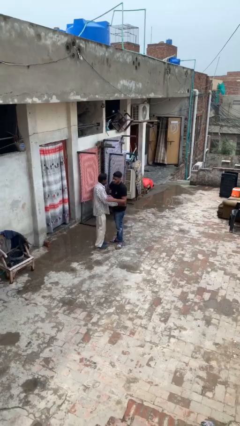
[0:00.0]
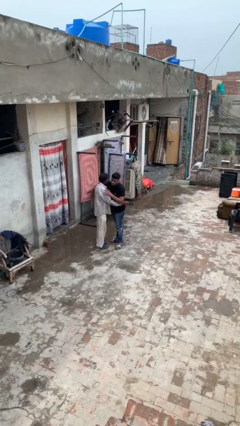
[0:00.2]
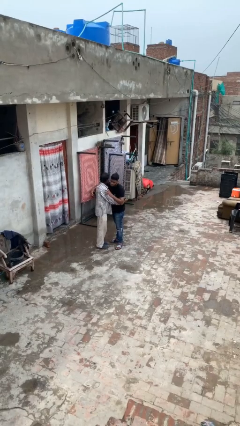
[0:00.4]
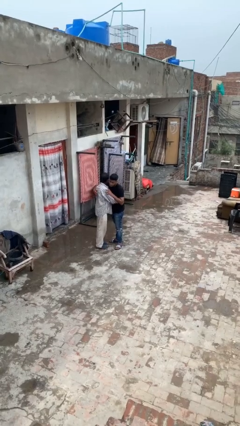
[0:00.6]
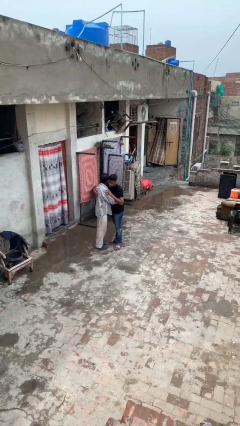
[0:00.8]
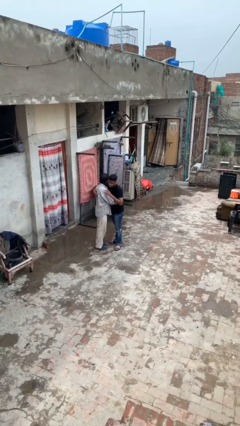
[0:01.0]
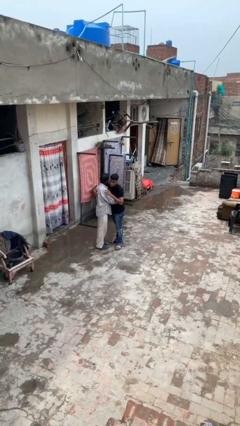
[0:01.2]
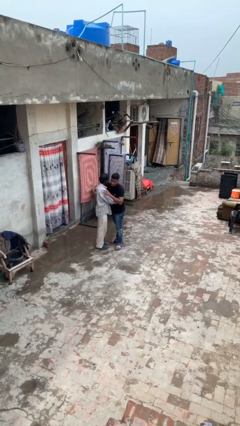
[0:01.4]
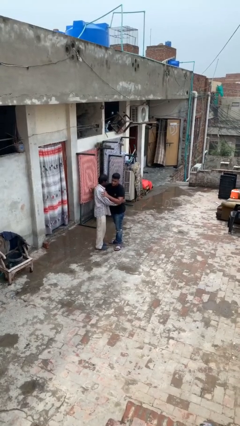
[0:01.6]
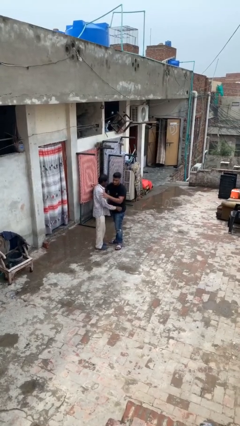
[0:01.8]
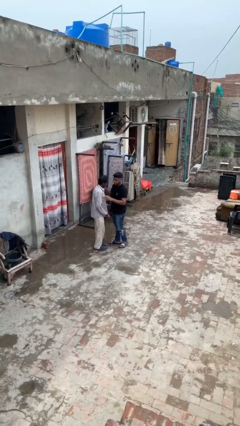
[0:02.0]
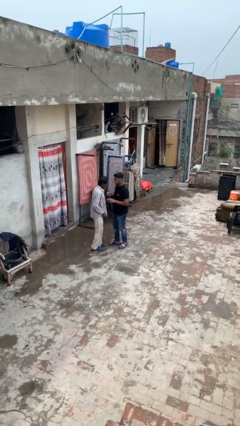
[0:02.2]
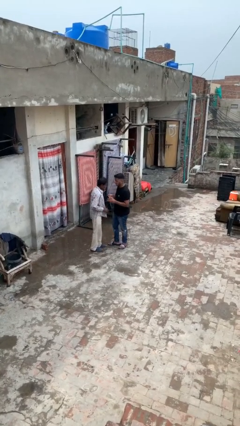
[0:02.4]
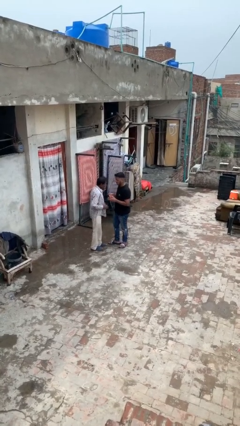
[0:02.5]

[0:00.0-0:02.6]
person embraces person

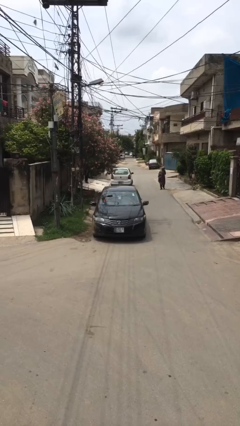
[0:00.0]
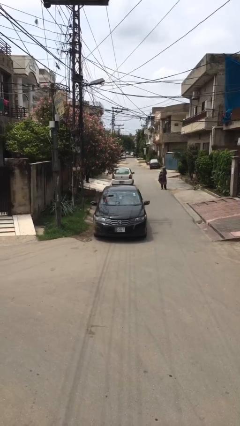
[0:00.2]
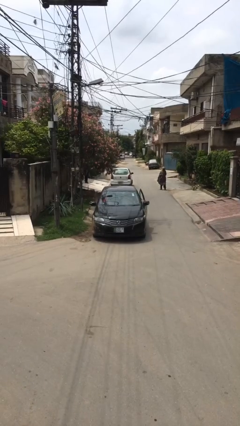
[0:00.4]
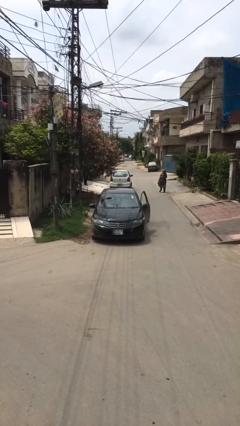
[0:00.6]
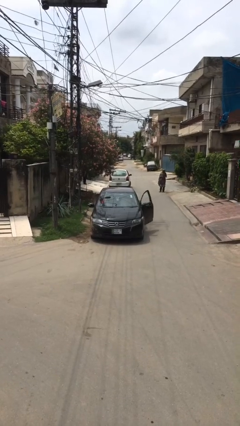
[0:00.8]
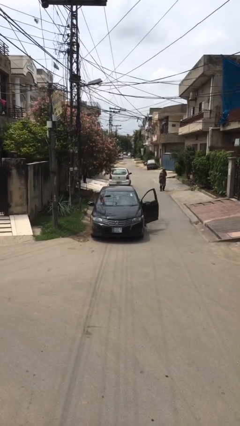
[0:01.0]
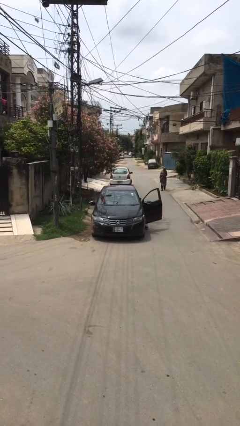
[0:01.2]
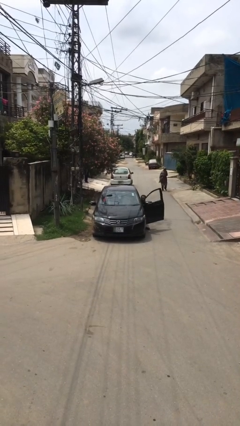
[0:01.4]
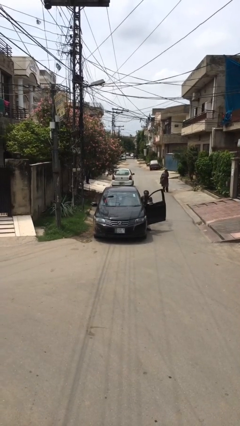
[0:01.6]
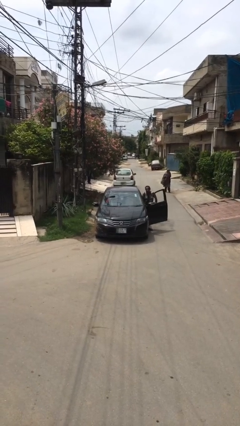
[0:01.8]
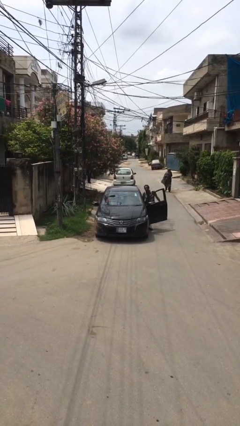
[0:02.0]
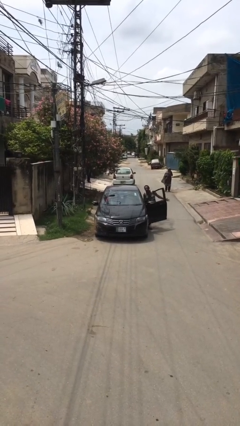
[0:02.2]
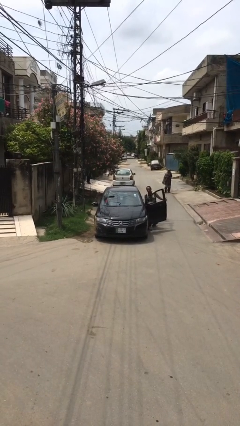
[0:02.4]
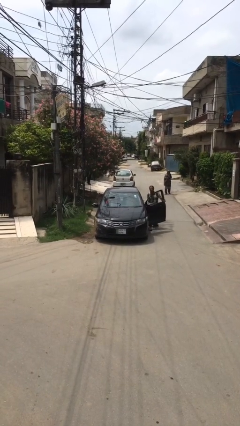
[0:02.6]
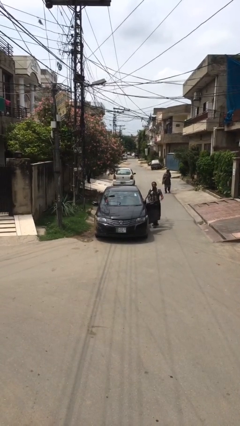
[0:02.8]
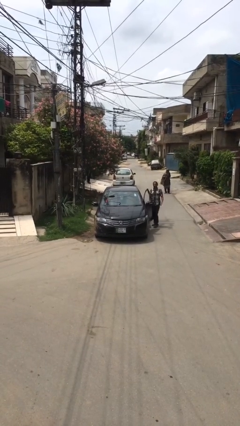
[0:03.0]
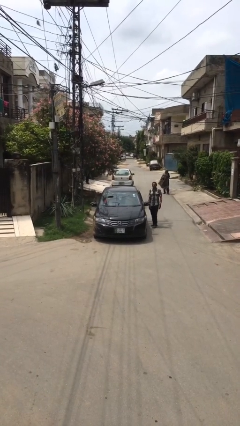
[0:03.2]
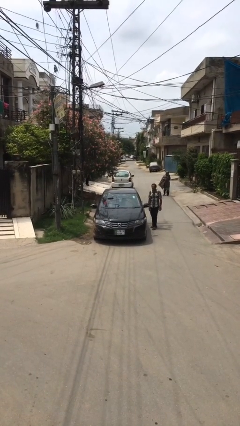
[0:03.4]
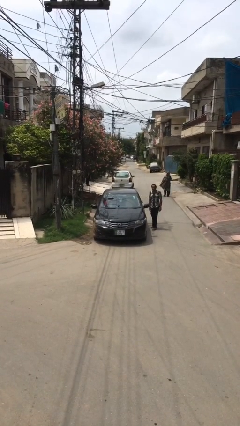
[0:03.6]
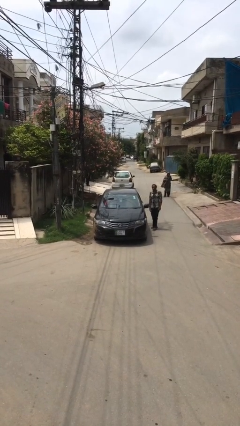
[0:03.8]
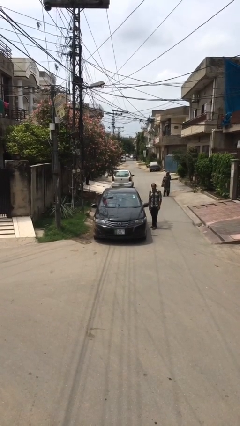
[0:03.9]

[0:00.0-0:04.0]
car drops off person

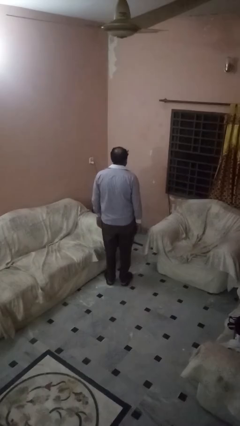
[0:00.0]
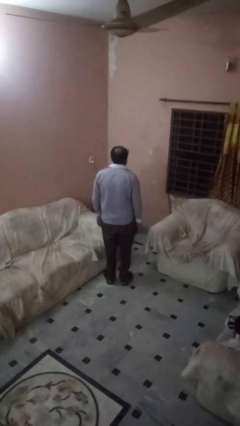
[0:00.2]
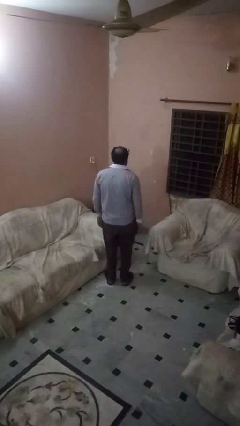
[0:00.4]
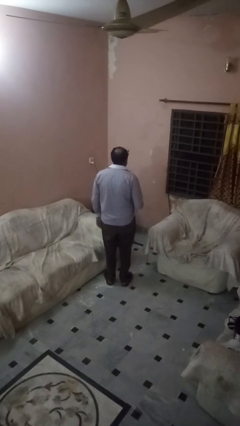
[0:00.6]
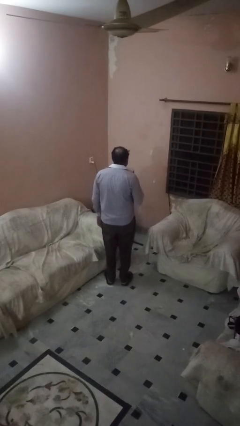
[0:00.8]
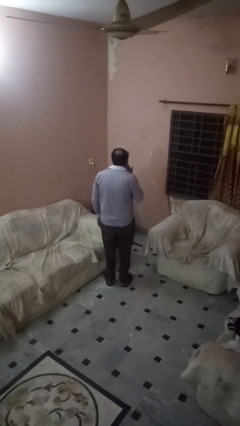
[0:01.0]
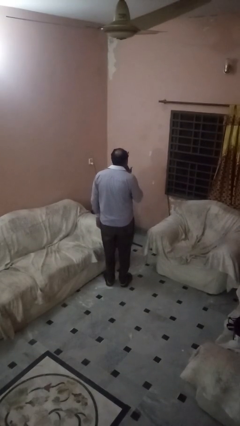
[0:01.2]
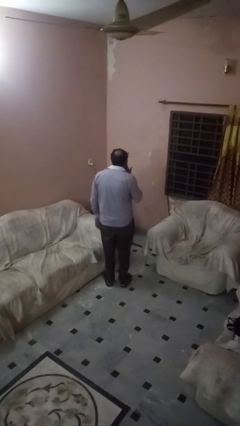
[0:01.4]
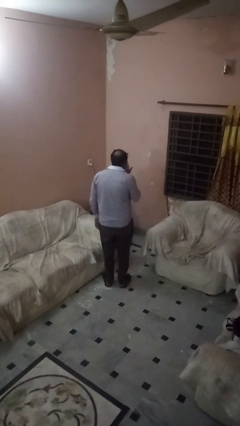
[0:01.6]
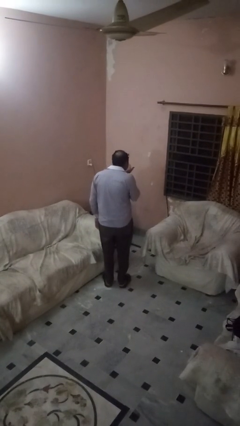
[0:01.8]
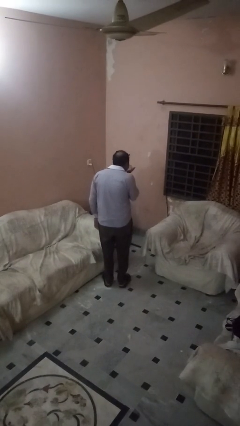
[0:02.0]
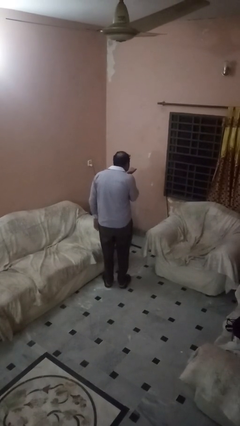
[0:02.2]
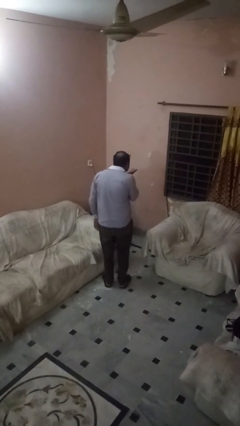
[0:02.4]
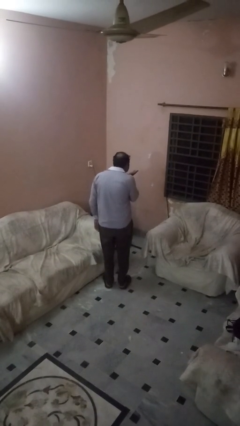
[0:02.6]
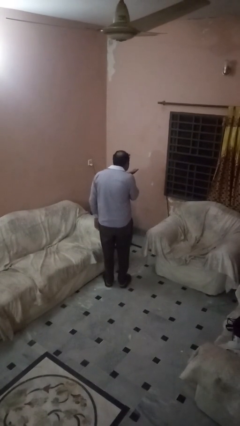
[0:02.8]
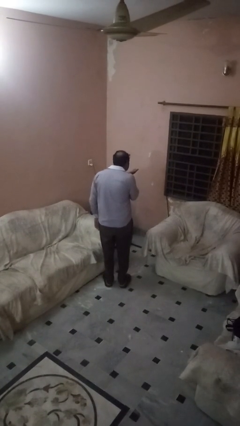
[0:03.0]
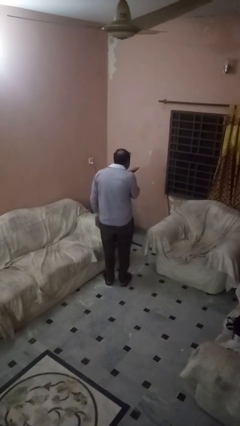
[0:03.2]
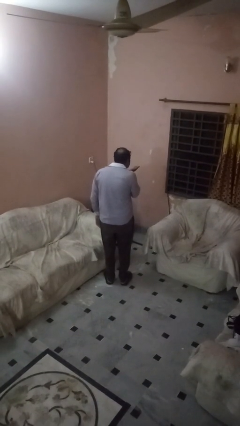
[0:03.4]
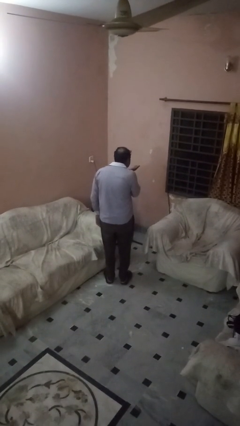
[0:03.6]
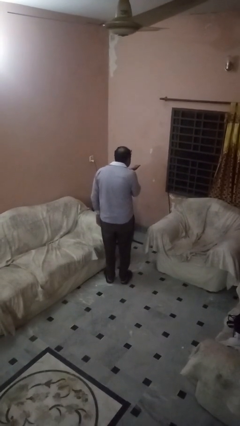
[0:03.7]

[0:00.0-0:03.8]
person gestures blow kiss

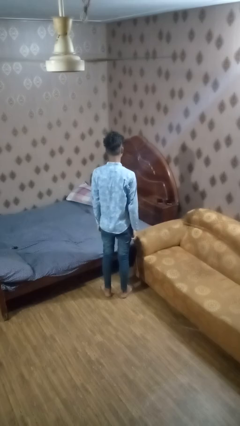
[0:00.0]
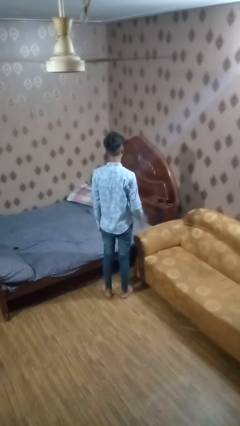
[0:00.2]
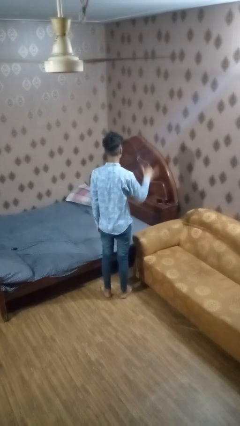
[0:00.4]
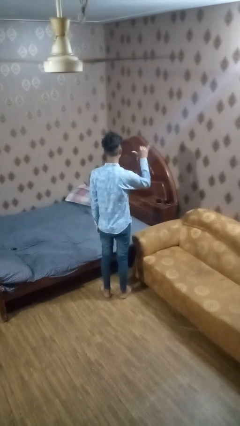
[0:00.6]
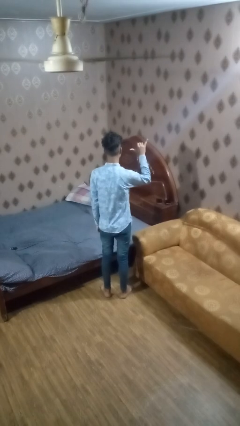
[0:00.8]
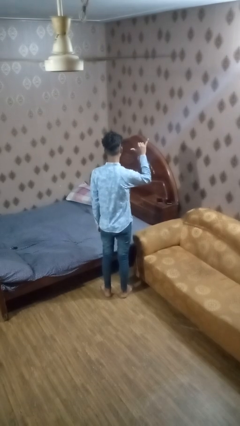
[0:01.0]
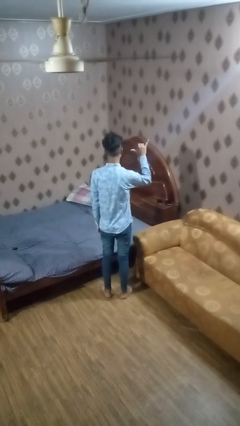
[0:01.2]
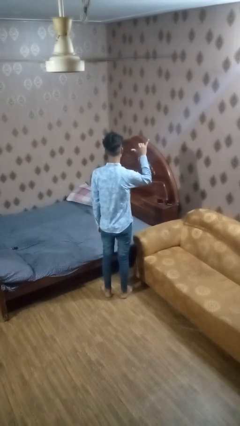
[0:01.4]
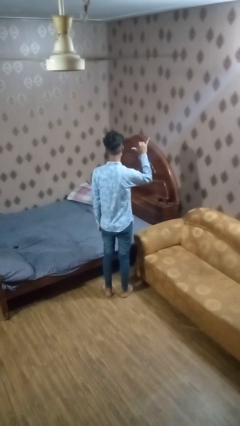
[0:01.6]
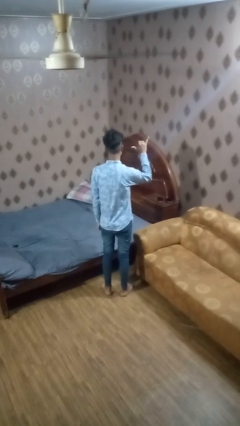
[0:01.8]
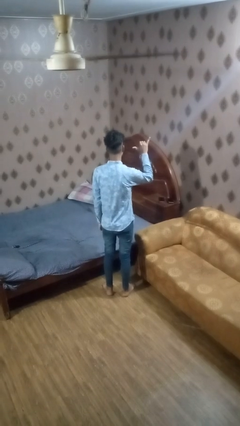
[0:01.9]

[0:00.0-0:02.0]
person gestures hang loose

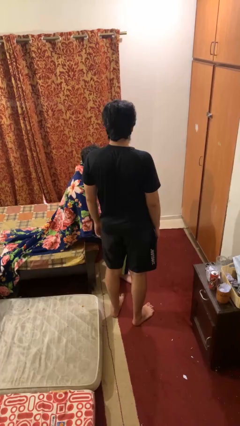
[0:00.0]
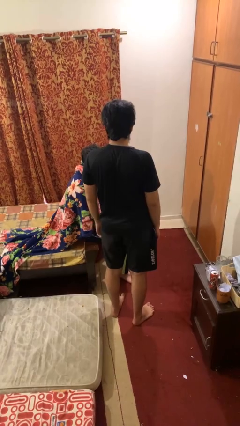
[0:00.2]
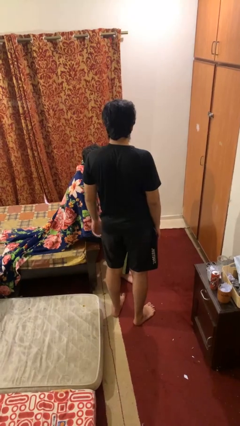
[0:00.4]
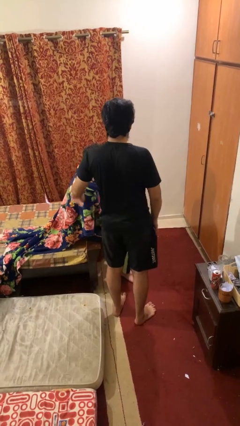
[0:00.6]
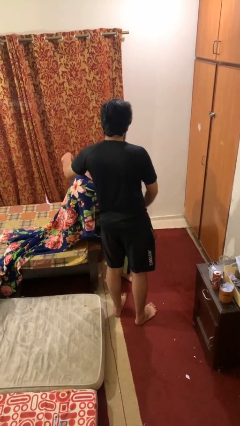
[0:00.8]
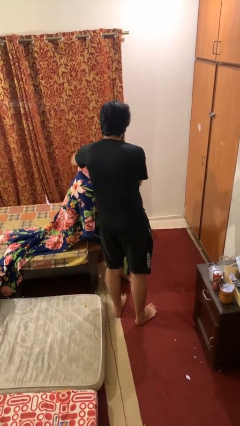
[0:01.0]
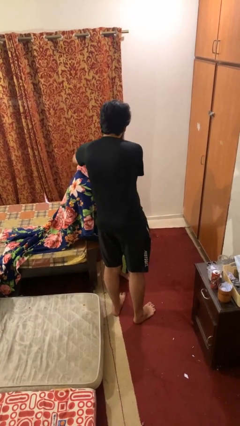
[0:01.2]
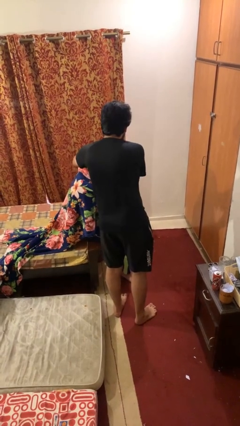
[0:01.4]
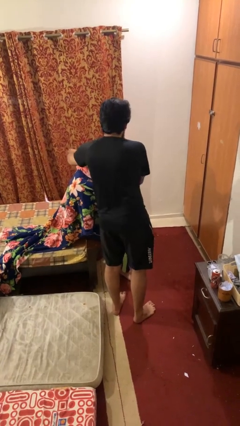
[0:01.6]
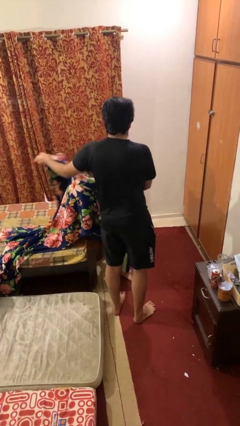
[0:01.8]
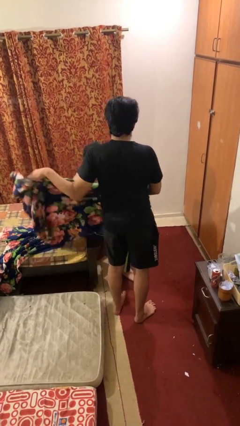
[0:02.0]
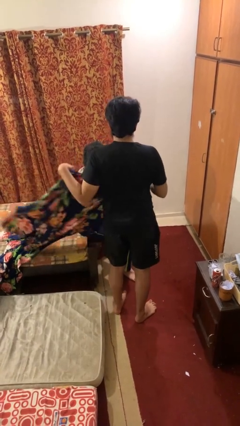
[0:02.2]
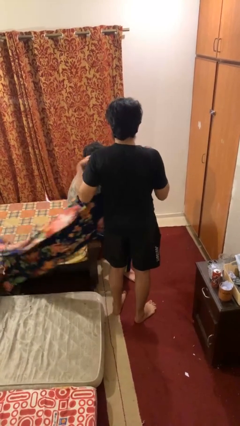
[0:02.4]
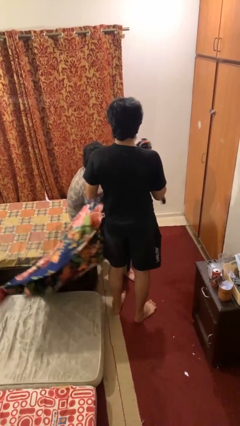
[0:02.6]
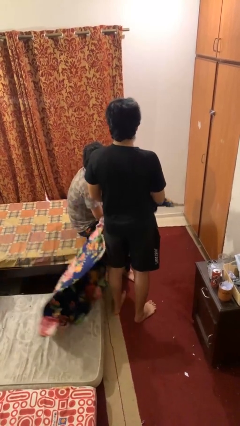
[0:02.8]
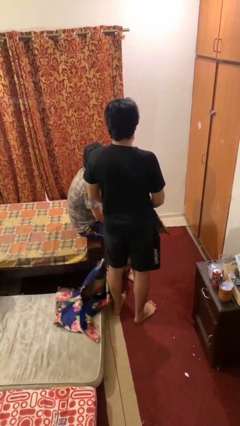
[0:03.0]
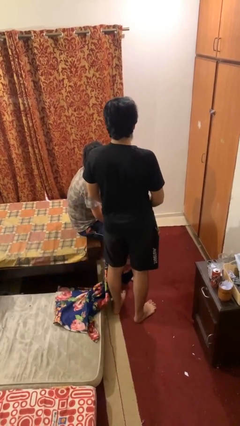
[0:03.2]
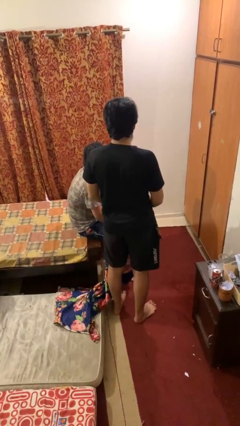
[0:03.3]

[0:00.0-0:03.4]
person uncovers friend with blanket

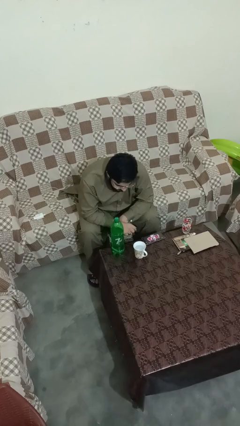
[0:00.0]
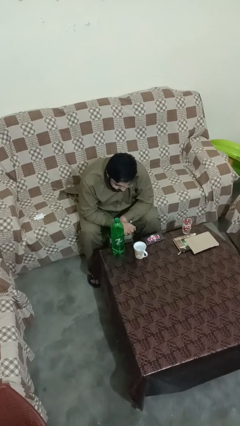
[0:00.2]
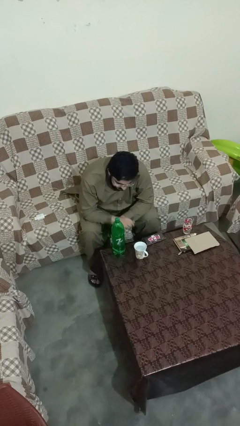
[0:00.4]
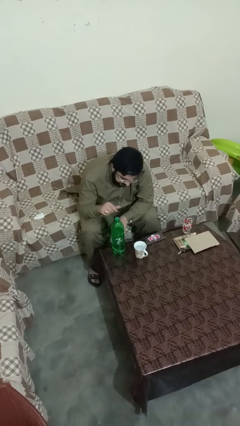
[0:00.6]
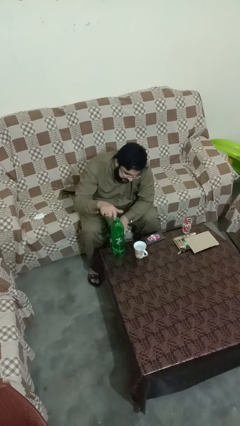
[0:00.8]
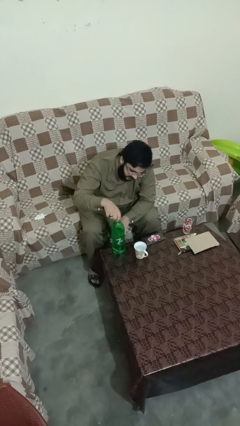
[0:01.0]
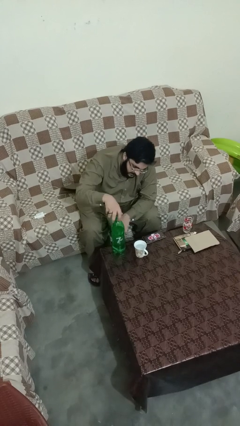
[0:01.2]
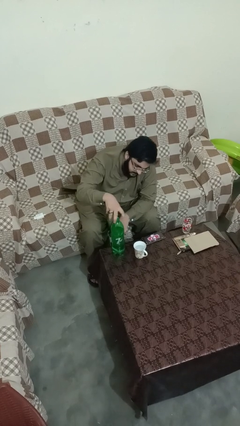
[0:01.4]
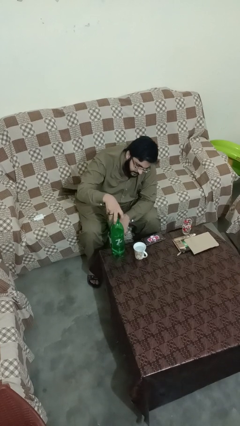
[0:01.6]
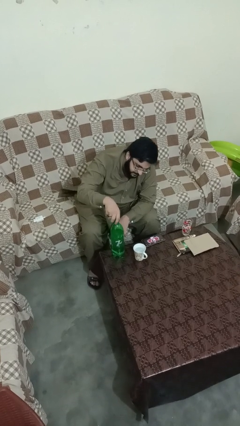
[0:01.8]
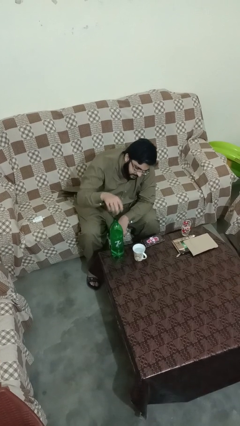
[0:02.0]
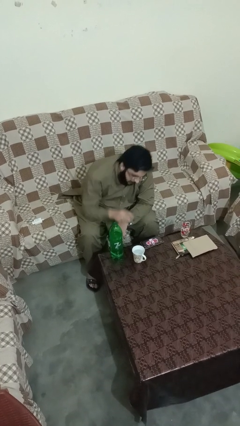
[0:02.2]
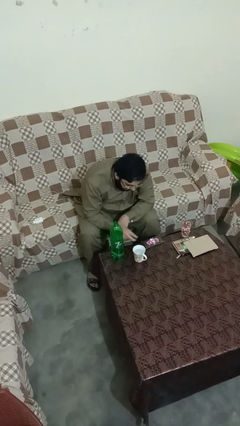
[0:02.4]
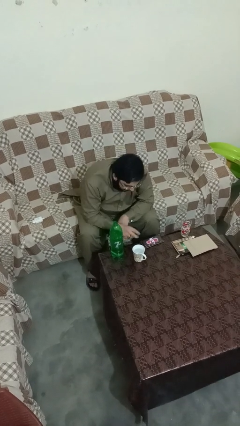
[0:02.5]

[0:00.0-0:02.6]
person unscrews lid from bottle
